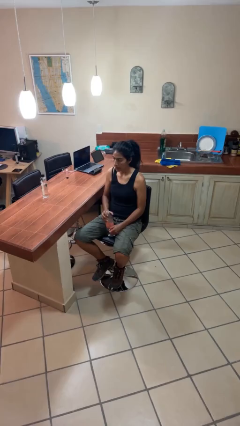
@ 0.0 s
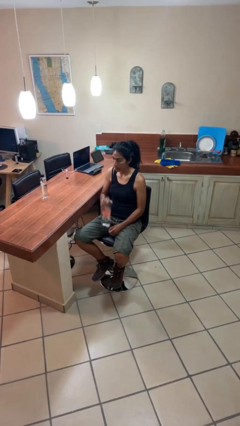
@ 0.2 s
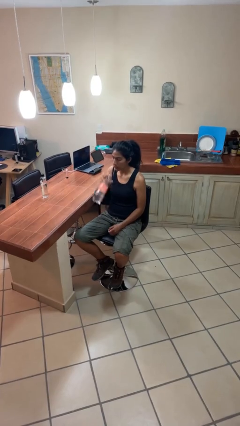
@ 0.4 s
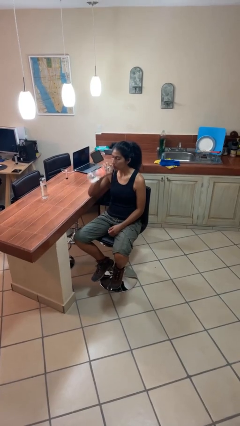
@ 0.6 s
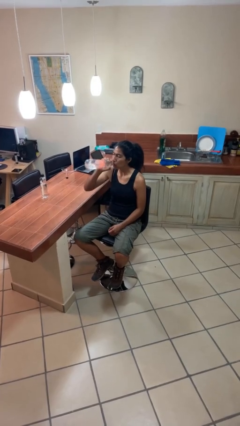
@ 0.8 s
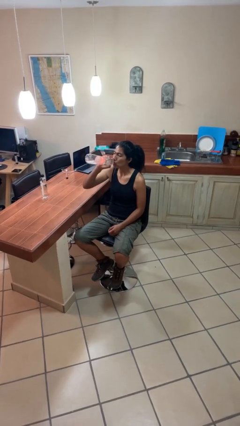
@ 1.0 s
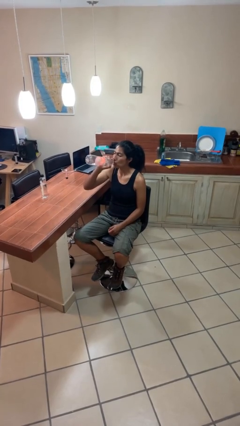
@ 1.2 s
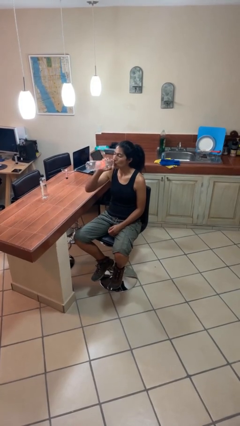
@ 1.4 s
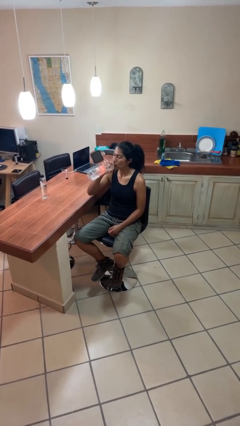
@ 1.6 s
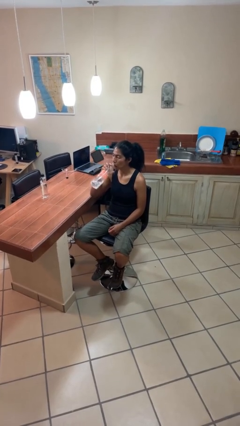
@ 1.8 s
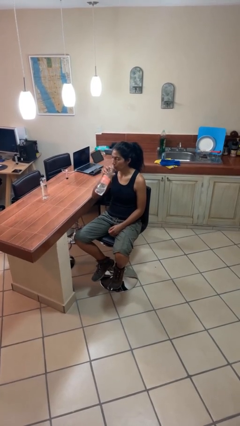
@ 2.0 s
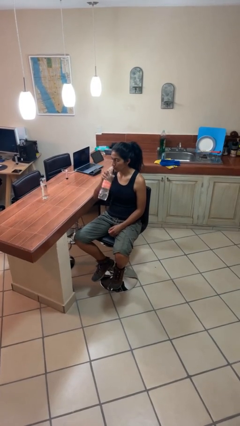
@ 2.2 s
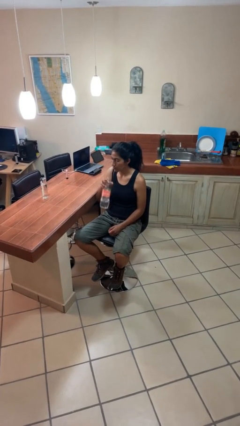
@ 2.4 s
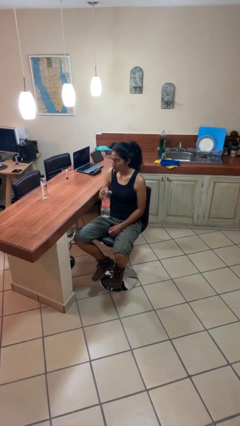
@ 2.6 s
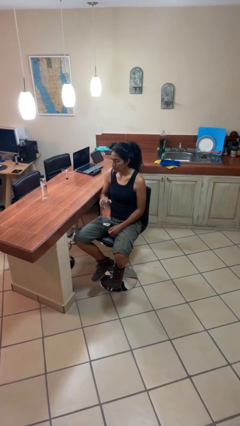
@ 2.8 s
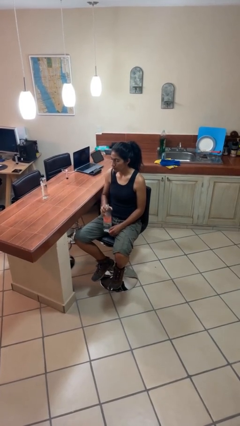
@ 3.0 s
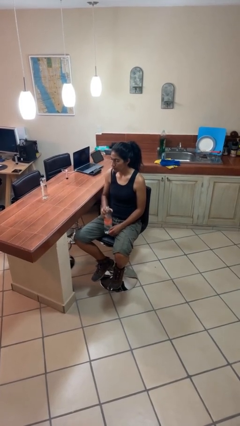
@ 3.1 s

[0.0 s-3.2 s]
person drinks from bottle

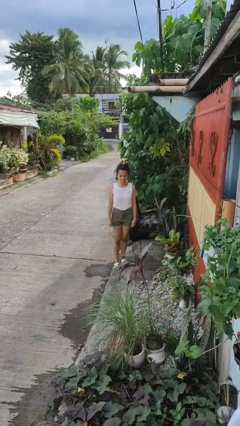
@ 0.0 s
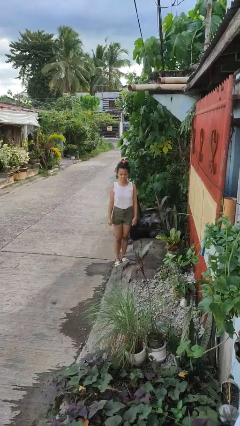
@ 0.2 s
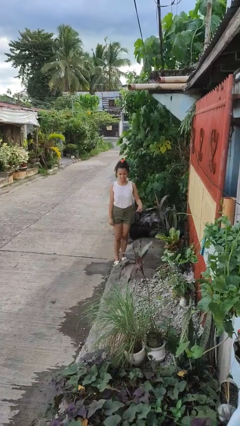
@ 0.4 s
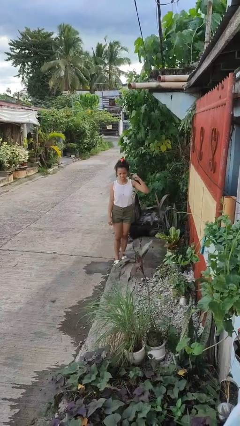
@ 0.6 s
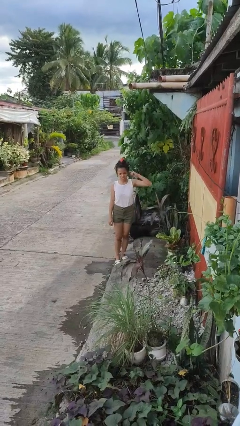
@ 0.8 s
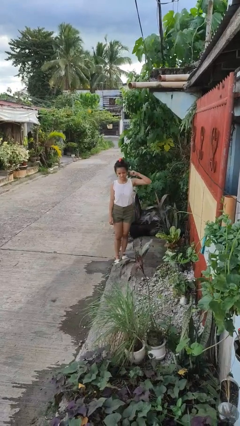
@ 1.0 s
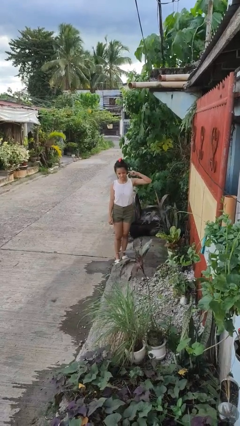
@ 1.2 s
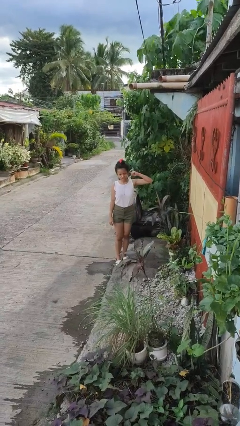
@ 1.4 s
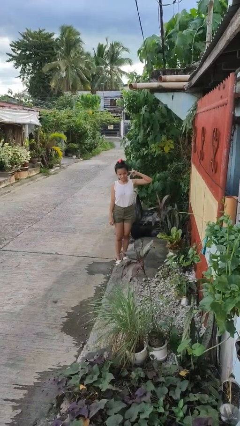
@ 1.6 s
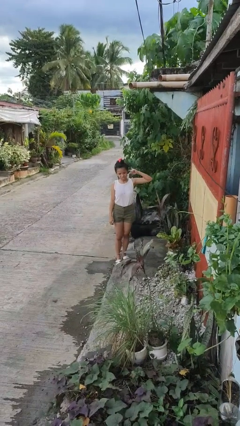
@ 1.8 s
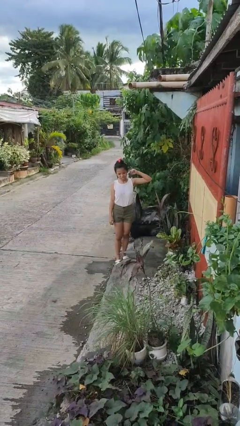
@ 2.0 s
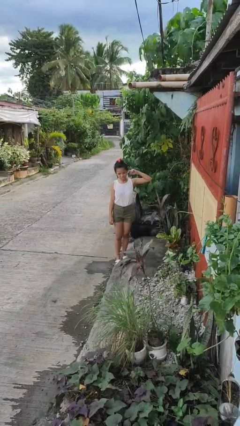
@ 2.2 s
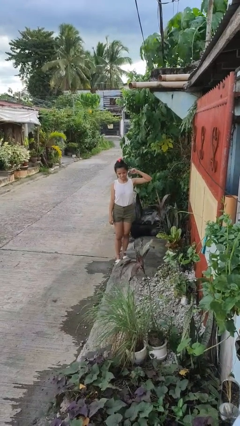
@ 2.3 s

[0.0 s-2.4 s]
person touches earlobe

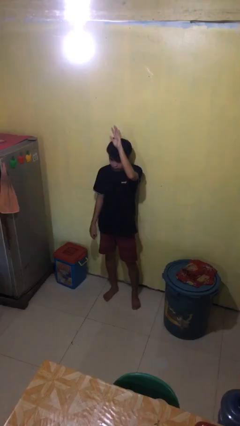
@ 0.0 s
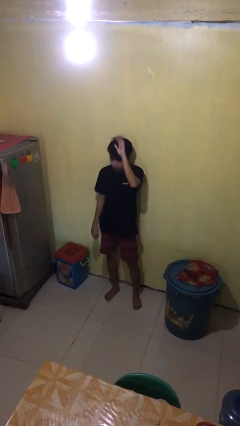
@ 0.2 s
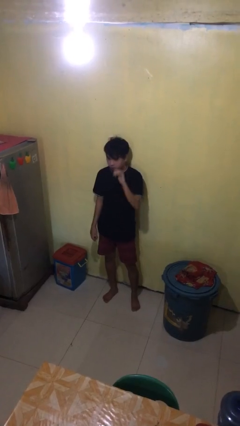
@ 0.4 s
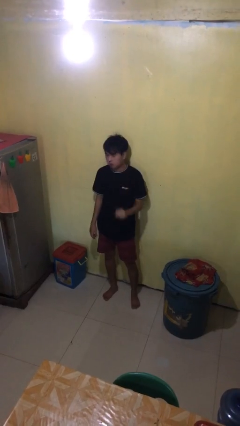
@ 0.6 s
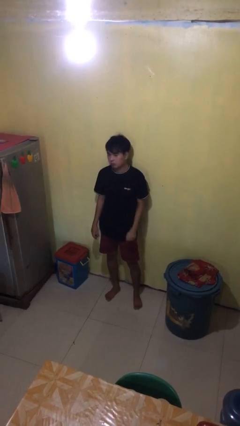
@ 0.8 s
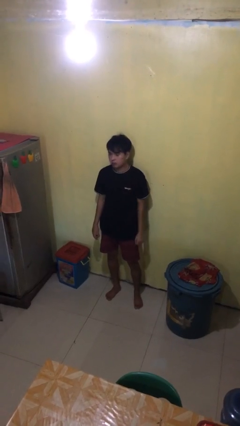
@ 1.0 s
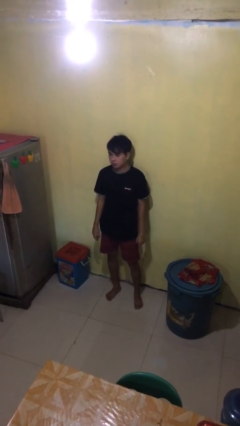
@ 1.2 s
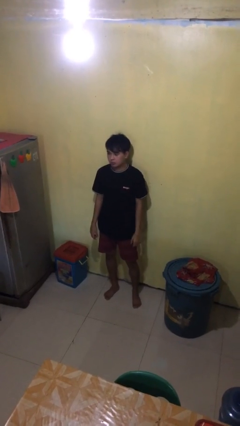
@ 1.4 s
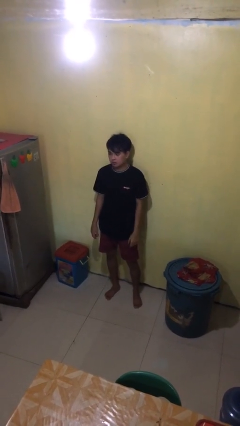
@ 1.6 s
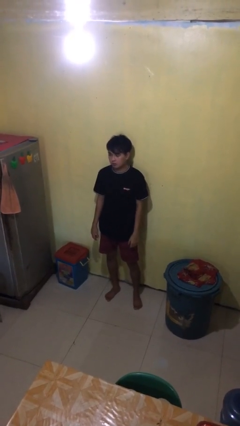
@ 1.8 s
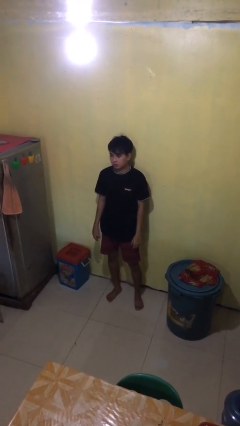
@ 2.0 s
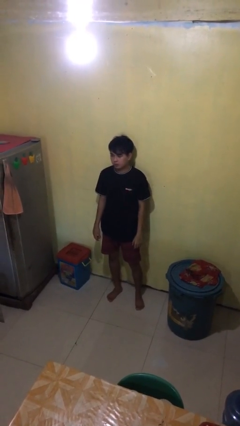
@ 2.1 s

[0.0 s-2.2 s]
person gestures lower hand

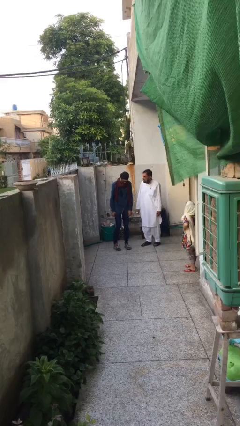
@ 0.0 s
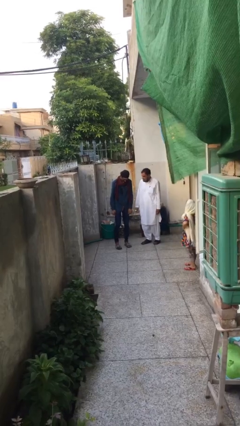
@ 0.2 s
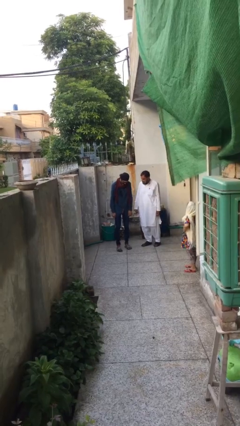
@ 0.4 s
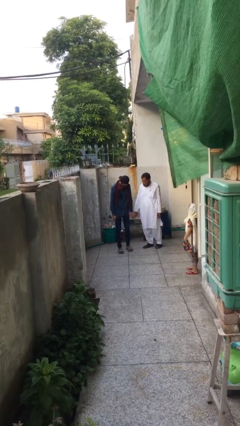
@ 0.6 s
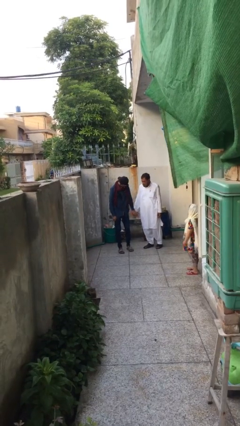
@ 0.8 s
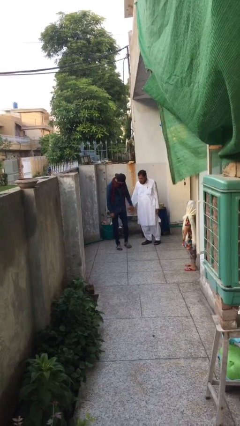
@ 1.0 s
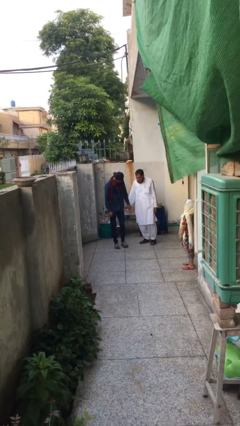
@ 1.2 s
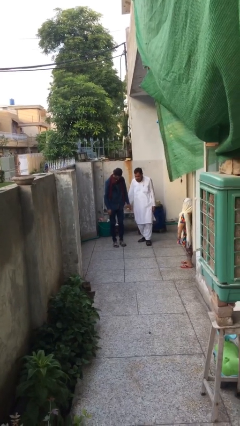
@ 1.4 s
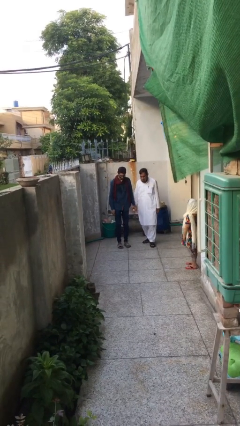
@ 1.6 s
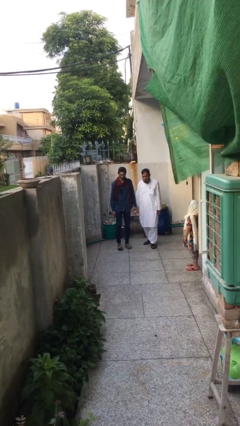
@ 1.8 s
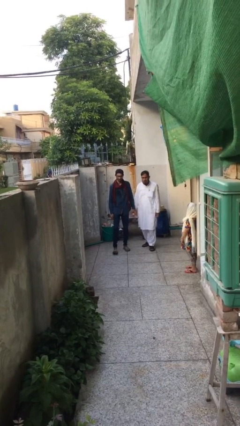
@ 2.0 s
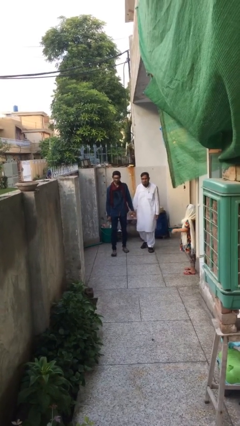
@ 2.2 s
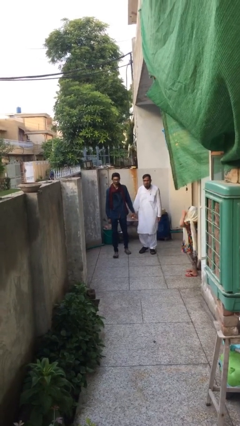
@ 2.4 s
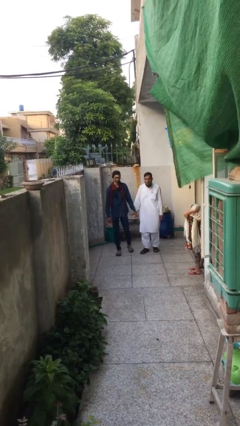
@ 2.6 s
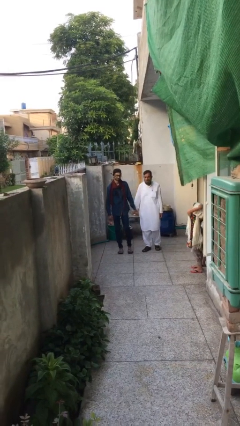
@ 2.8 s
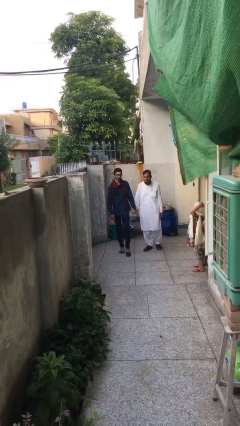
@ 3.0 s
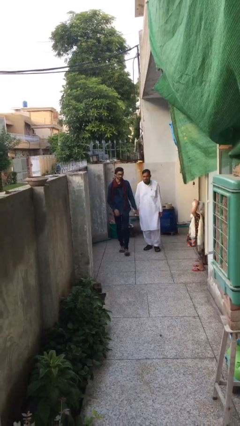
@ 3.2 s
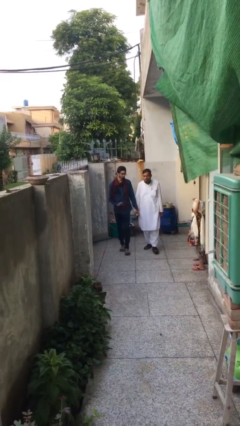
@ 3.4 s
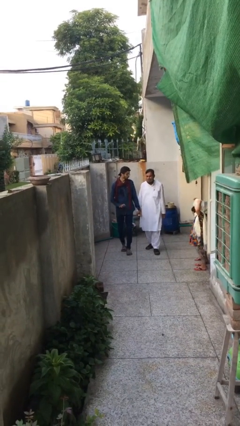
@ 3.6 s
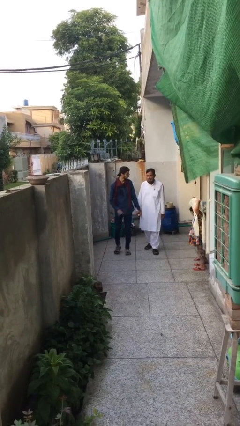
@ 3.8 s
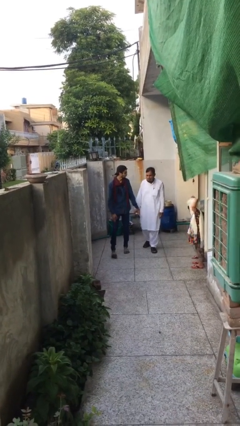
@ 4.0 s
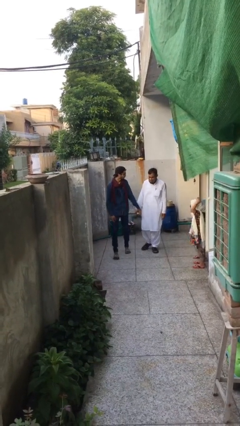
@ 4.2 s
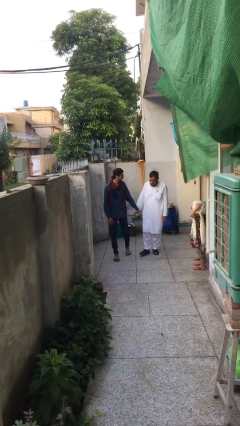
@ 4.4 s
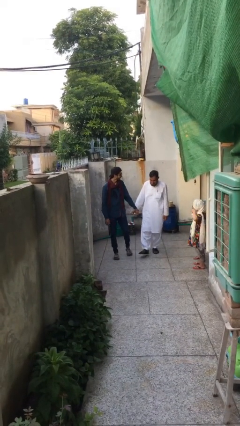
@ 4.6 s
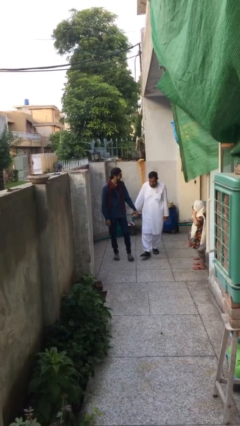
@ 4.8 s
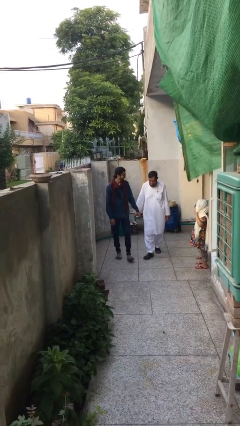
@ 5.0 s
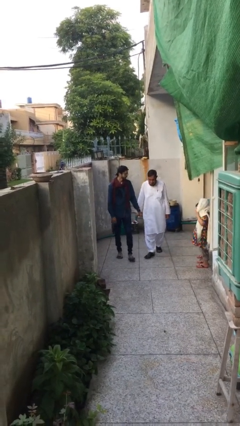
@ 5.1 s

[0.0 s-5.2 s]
person holds hand

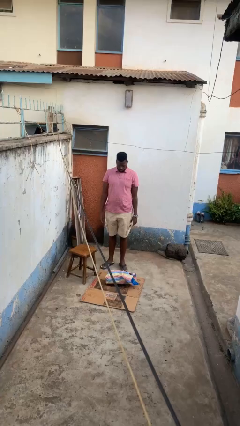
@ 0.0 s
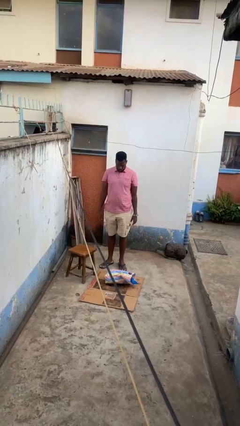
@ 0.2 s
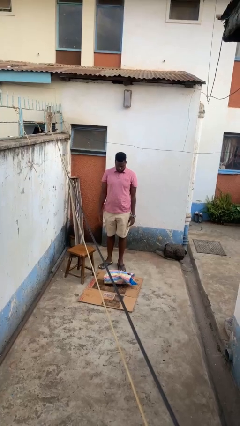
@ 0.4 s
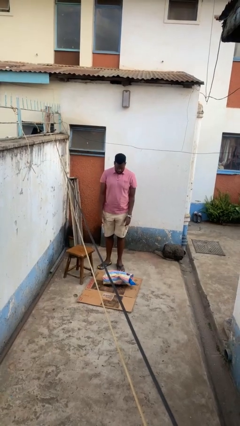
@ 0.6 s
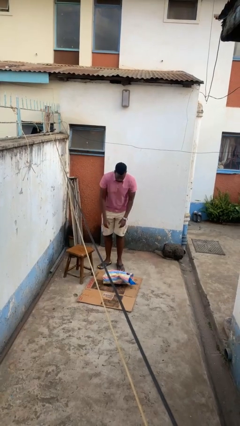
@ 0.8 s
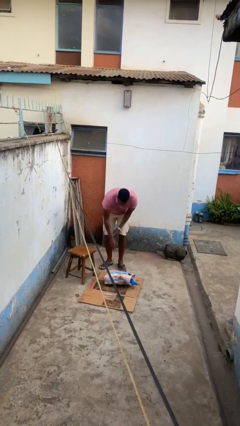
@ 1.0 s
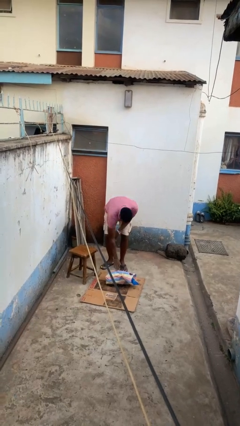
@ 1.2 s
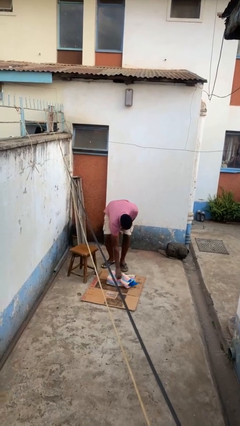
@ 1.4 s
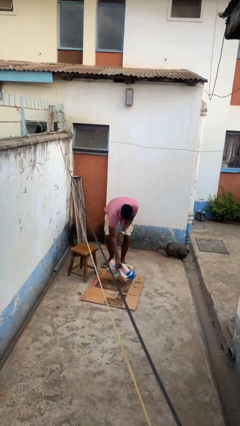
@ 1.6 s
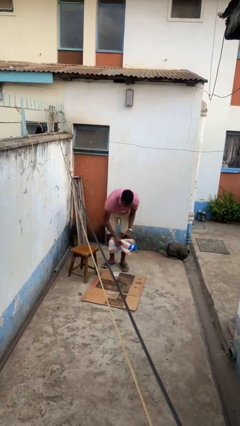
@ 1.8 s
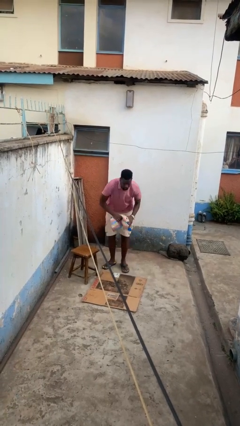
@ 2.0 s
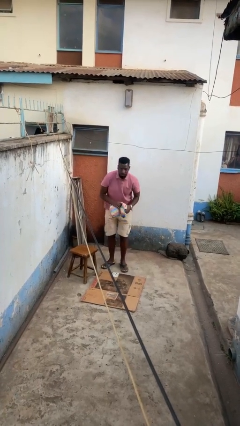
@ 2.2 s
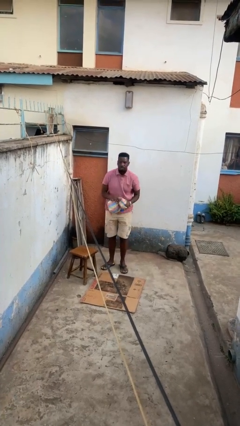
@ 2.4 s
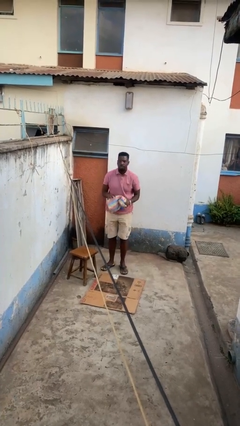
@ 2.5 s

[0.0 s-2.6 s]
person picks up object from floor

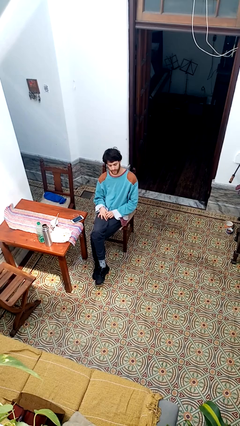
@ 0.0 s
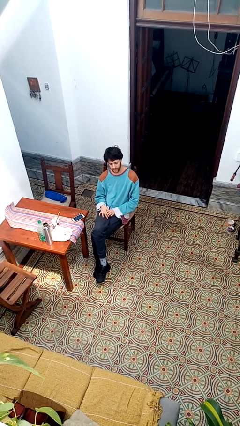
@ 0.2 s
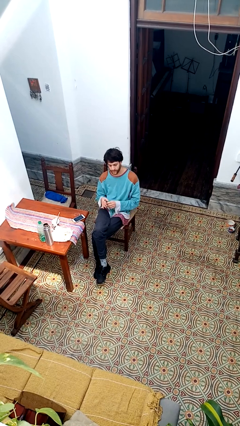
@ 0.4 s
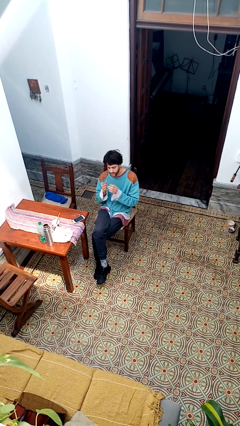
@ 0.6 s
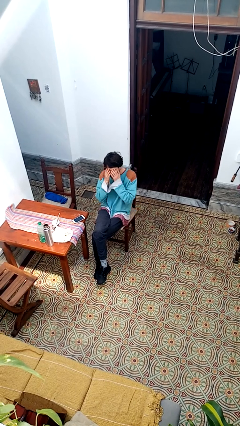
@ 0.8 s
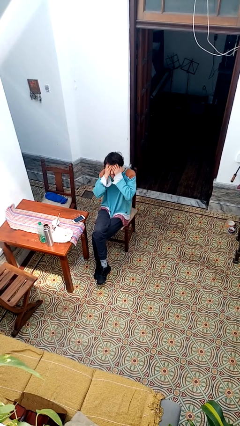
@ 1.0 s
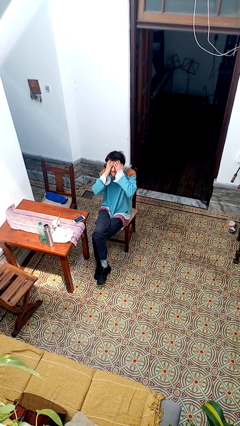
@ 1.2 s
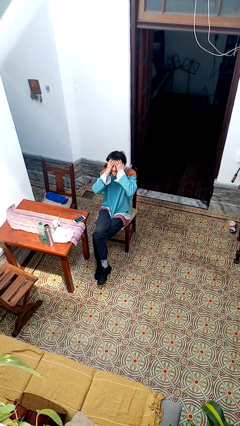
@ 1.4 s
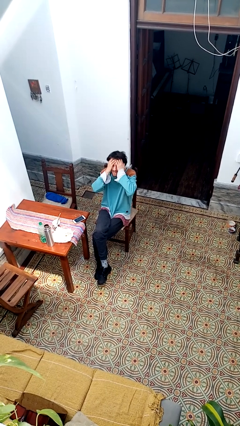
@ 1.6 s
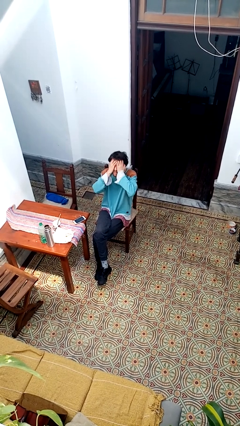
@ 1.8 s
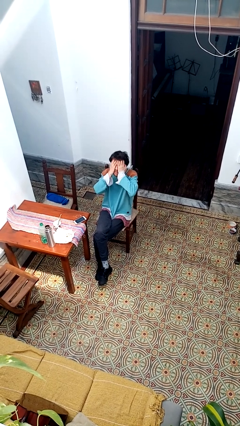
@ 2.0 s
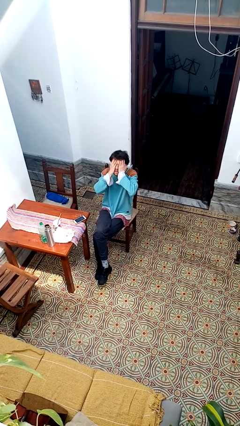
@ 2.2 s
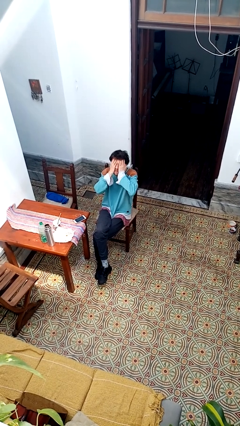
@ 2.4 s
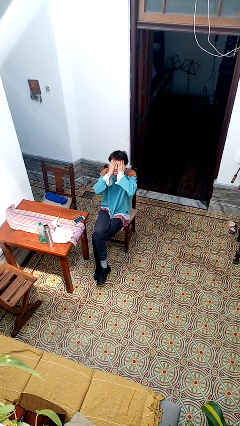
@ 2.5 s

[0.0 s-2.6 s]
person covers face with hands
